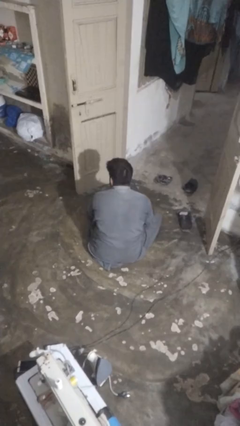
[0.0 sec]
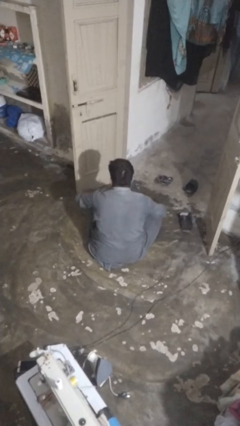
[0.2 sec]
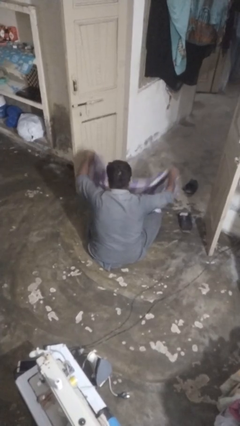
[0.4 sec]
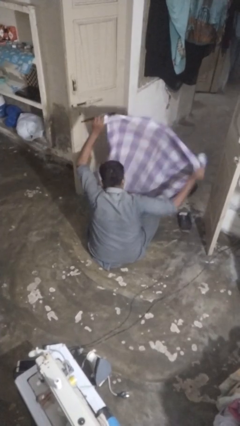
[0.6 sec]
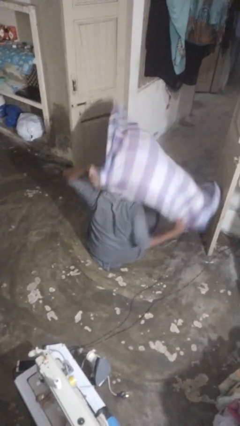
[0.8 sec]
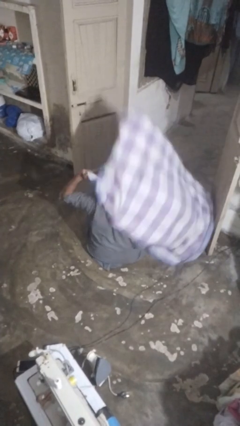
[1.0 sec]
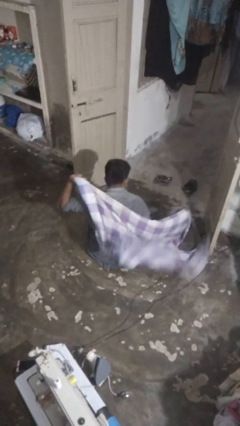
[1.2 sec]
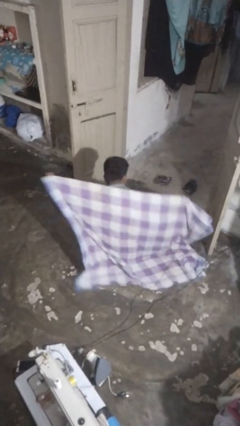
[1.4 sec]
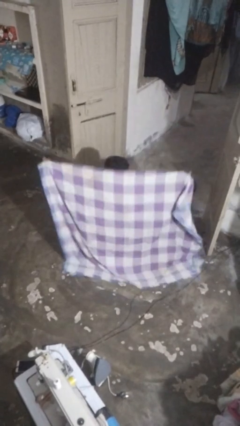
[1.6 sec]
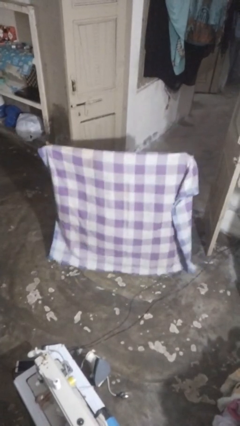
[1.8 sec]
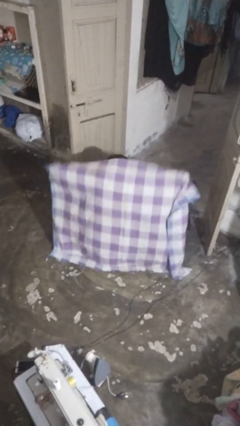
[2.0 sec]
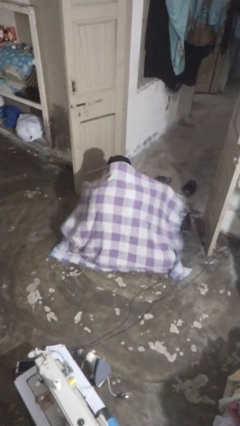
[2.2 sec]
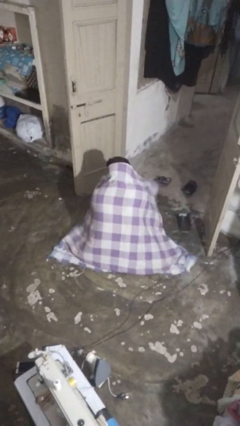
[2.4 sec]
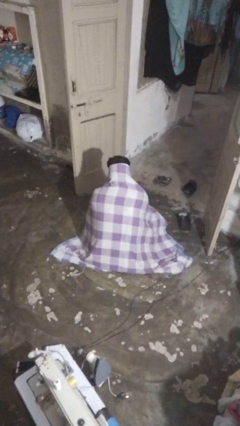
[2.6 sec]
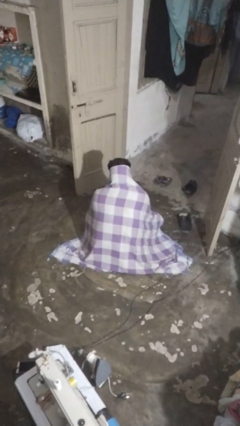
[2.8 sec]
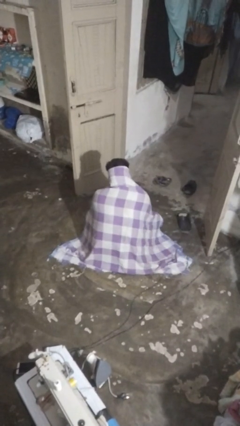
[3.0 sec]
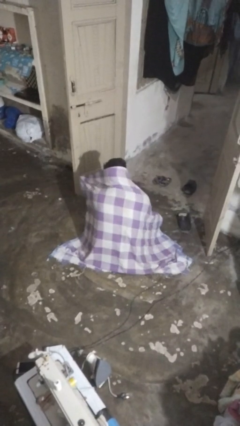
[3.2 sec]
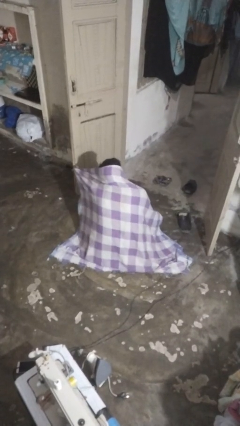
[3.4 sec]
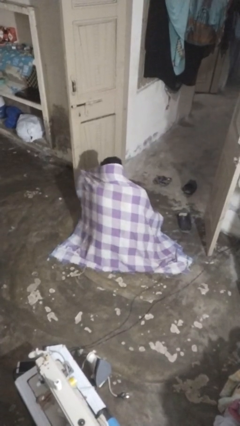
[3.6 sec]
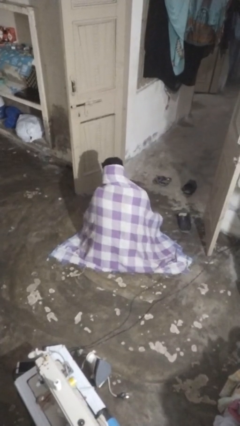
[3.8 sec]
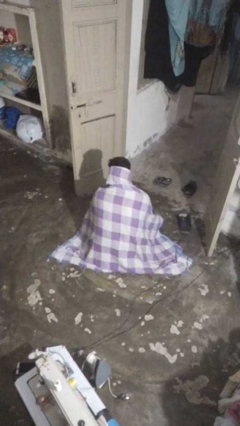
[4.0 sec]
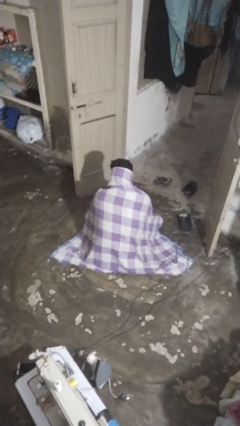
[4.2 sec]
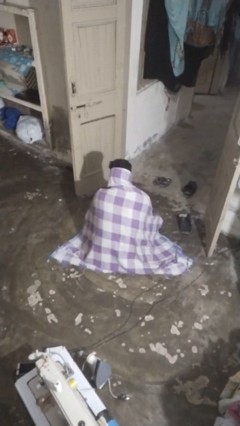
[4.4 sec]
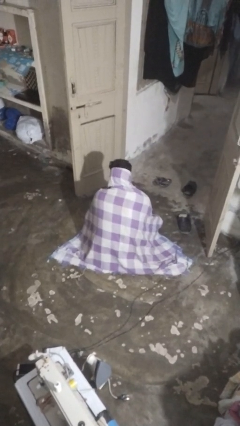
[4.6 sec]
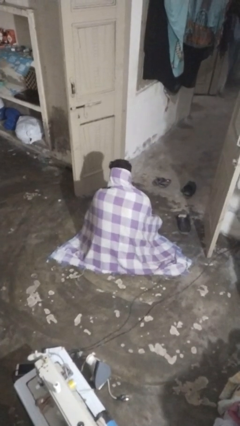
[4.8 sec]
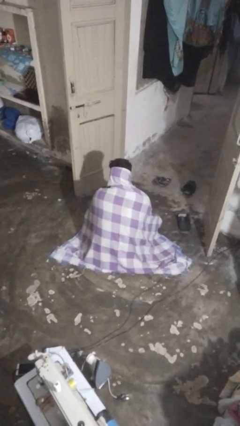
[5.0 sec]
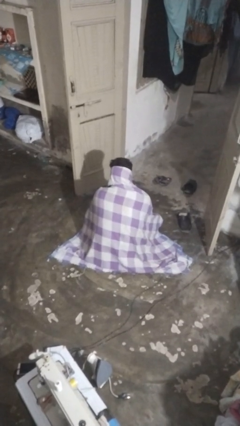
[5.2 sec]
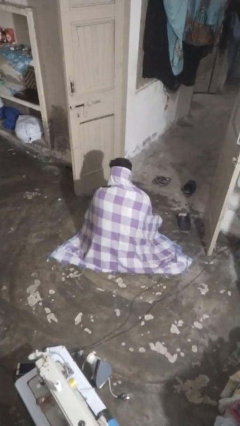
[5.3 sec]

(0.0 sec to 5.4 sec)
person covers with blanket

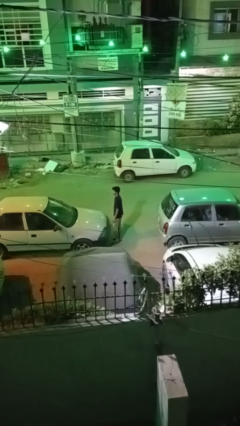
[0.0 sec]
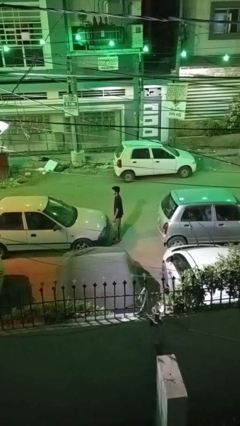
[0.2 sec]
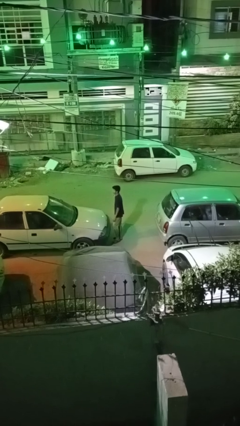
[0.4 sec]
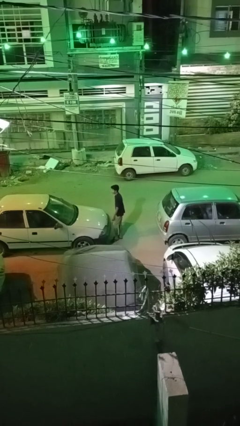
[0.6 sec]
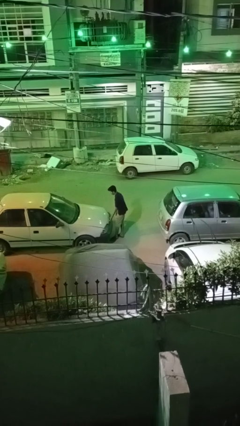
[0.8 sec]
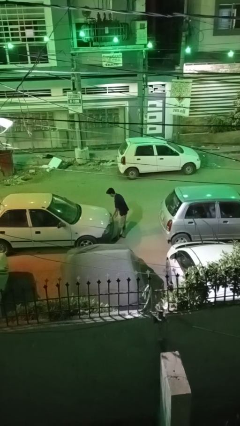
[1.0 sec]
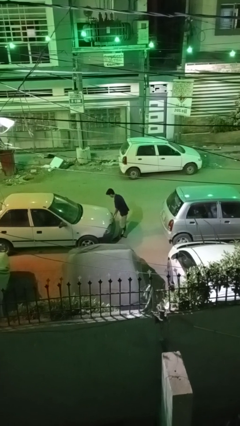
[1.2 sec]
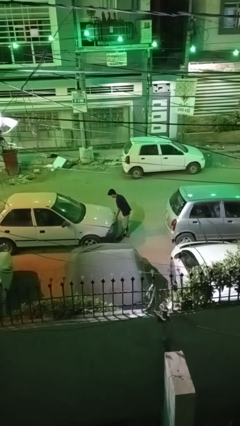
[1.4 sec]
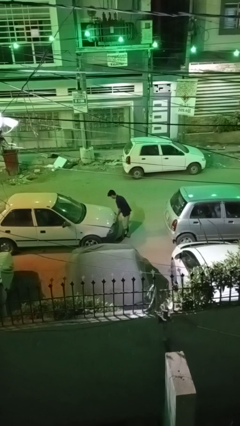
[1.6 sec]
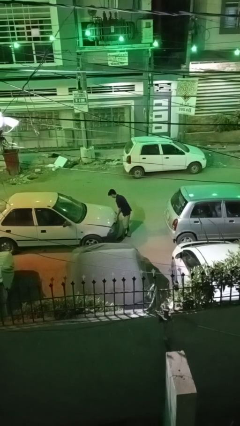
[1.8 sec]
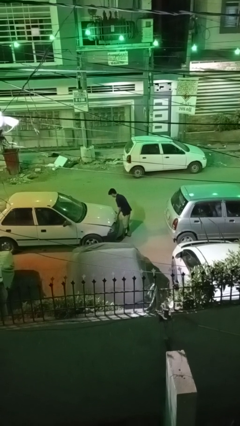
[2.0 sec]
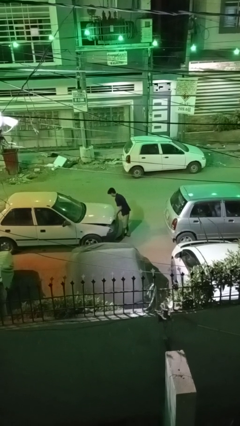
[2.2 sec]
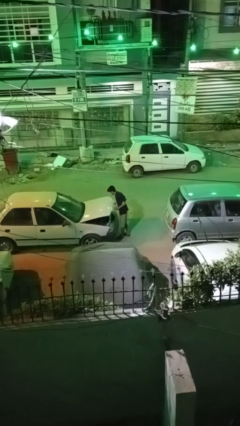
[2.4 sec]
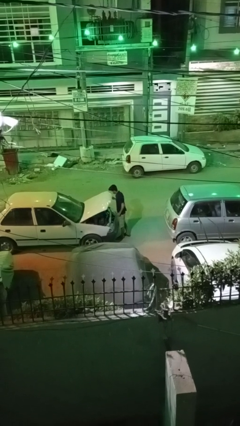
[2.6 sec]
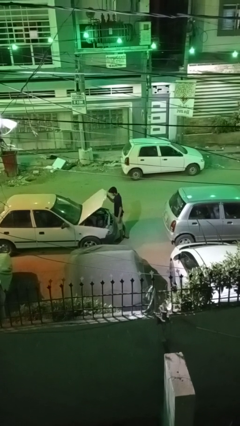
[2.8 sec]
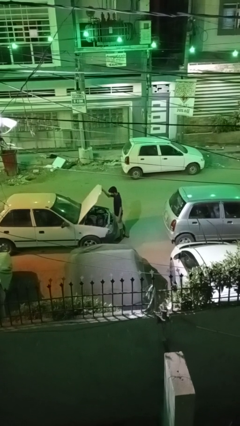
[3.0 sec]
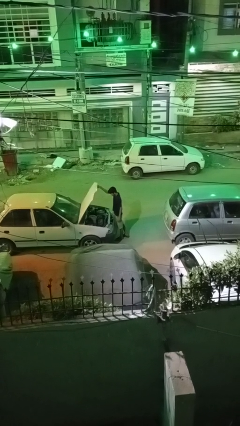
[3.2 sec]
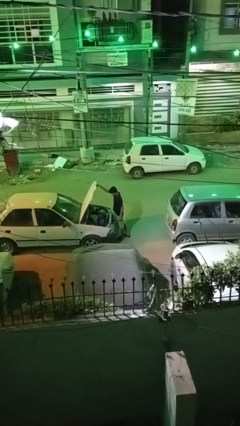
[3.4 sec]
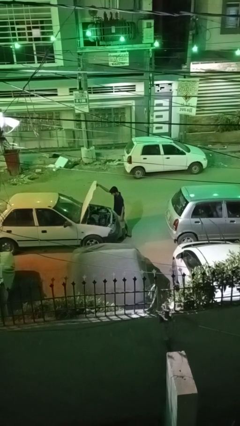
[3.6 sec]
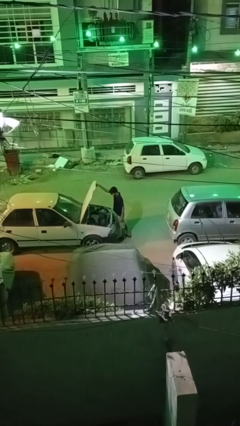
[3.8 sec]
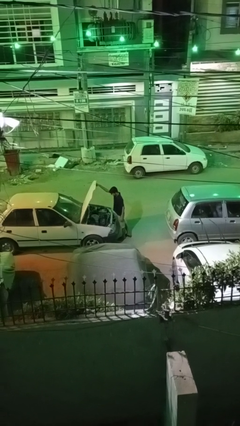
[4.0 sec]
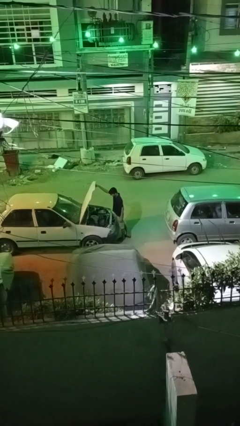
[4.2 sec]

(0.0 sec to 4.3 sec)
person opens car hood

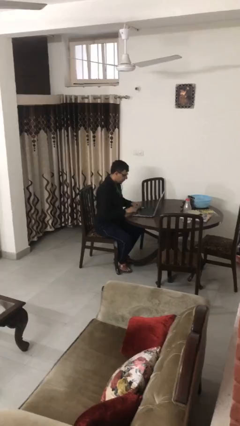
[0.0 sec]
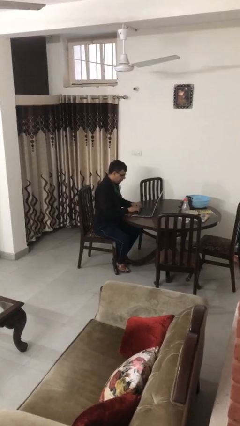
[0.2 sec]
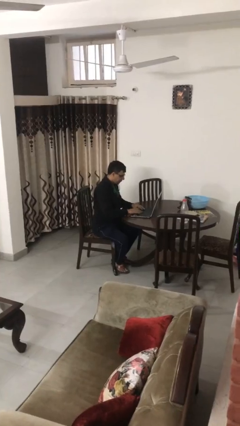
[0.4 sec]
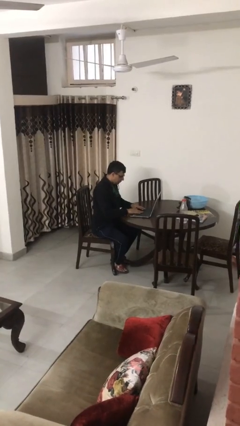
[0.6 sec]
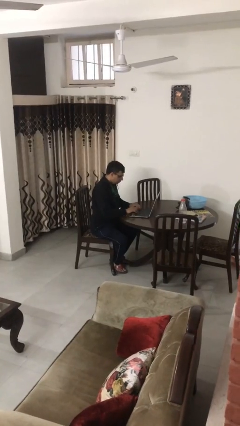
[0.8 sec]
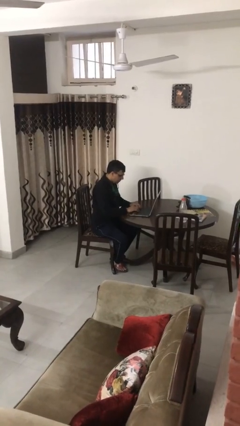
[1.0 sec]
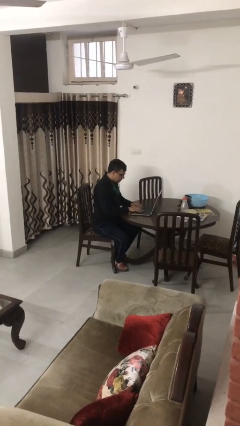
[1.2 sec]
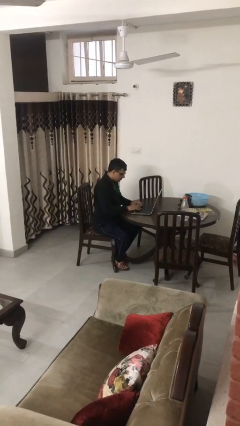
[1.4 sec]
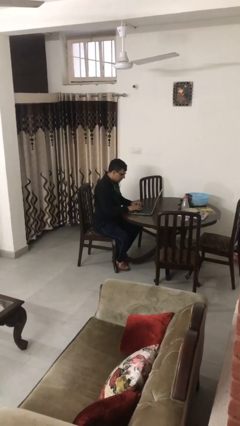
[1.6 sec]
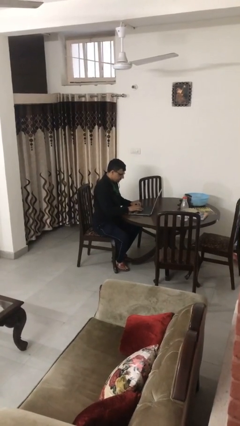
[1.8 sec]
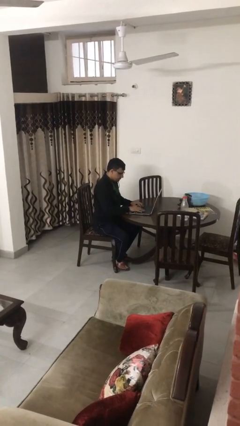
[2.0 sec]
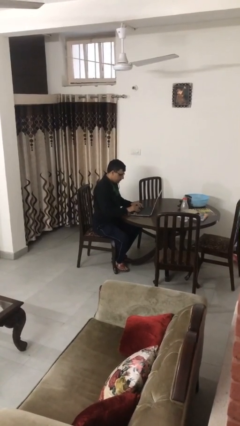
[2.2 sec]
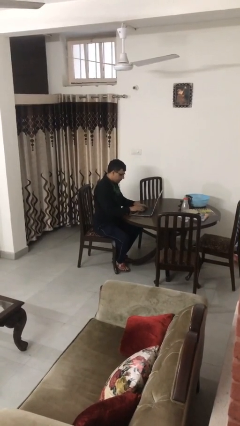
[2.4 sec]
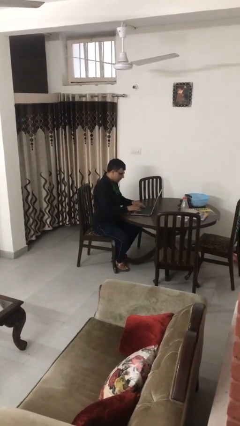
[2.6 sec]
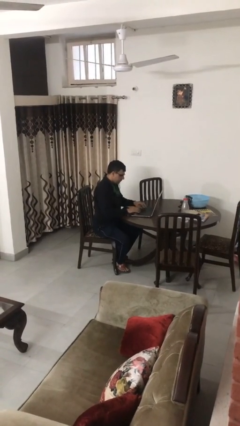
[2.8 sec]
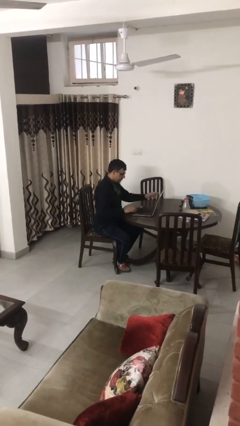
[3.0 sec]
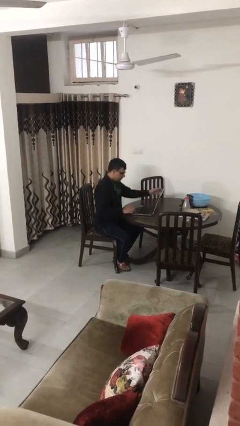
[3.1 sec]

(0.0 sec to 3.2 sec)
person interacts with laptop

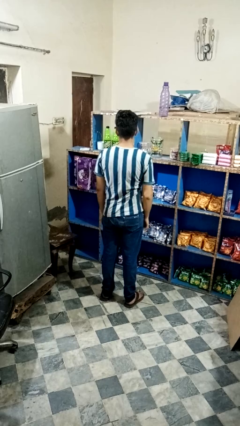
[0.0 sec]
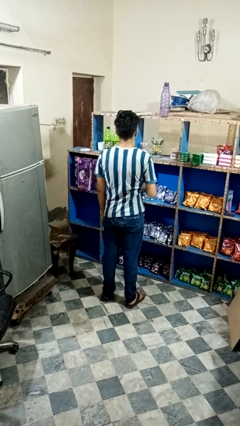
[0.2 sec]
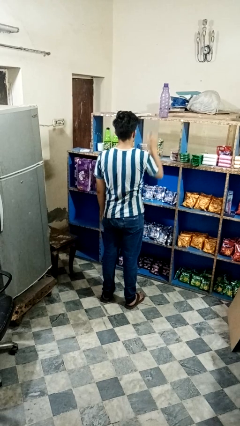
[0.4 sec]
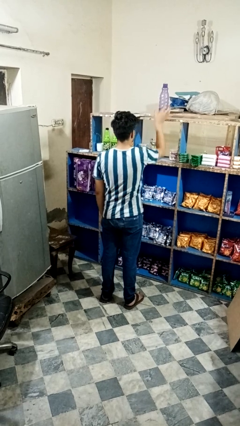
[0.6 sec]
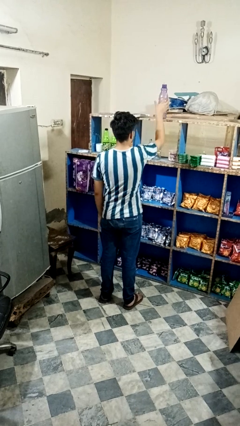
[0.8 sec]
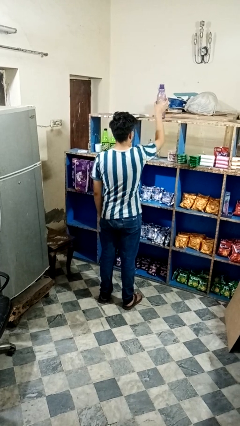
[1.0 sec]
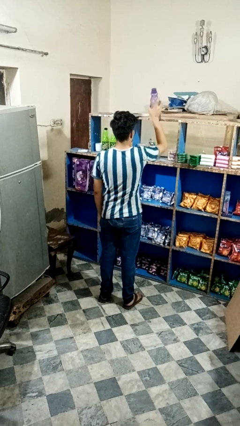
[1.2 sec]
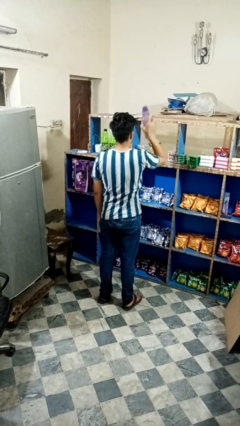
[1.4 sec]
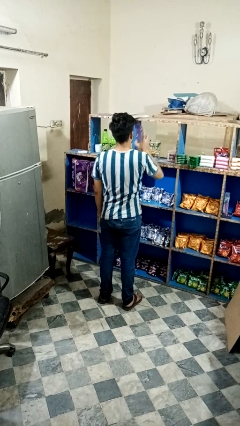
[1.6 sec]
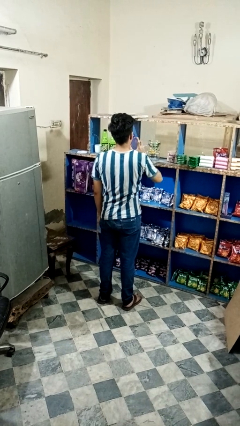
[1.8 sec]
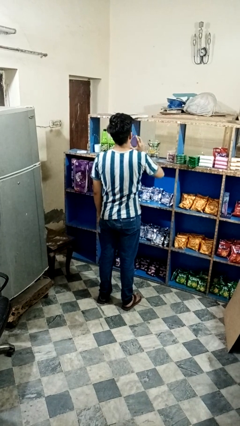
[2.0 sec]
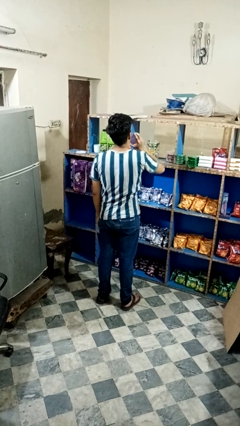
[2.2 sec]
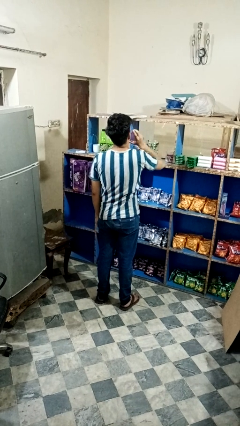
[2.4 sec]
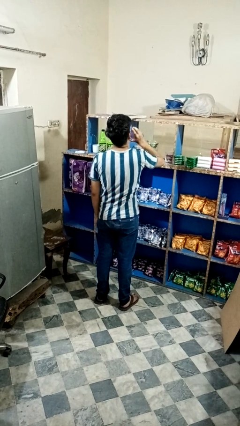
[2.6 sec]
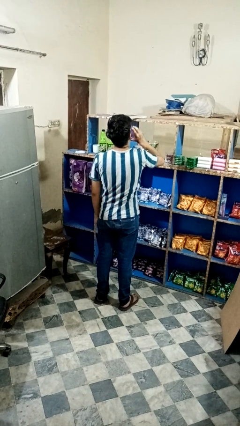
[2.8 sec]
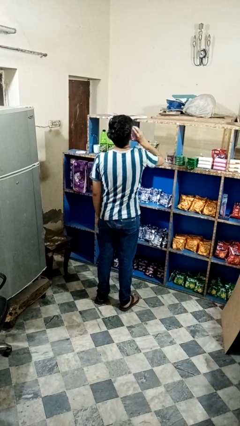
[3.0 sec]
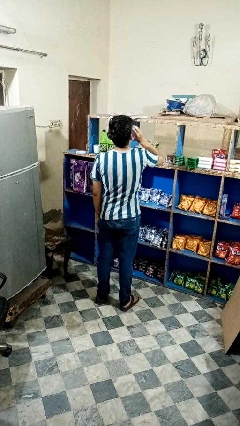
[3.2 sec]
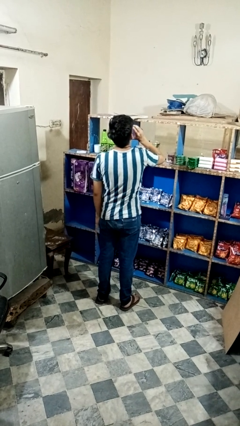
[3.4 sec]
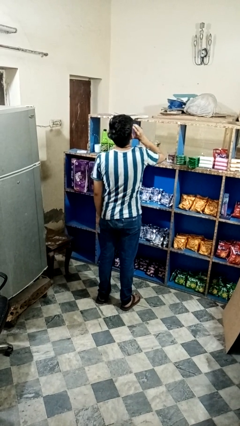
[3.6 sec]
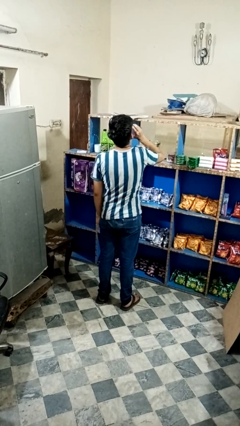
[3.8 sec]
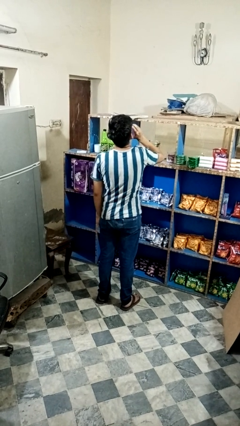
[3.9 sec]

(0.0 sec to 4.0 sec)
person drinks from bottle

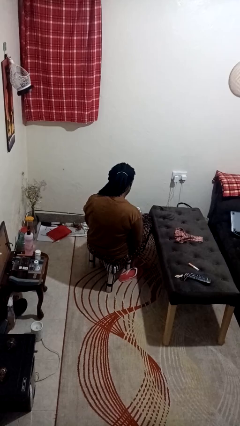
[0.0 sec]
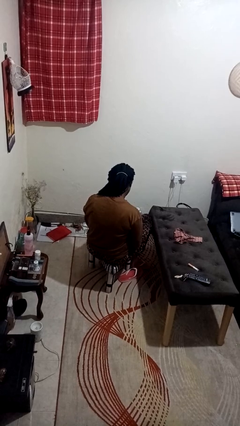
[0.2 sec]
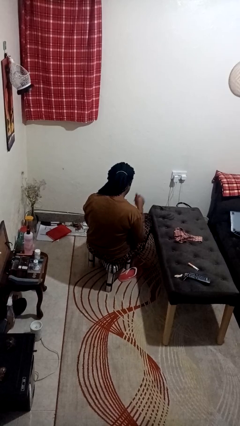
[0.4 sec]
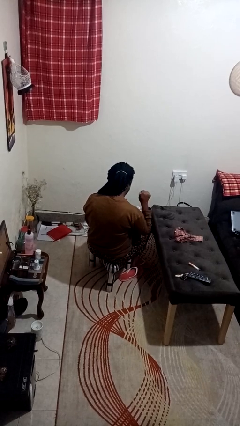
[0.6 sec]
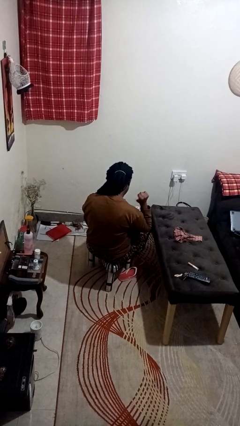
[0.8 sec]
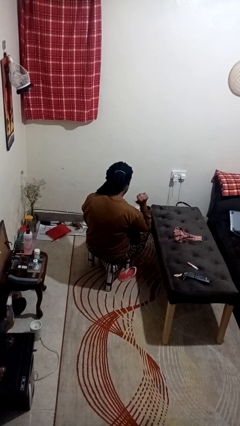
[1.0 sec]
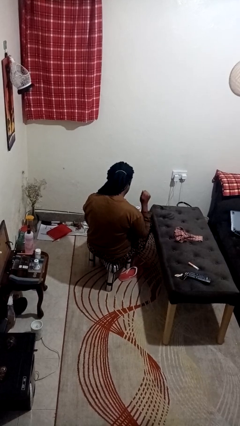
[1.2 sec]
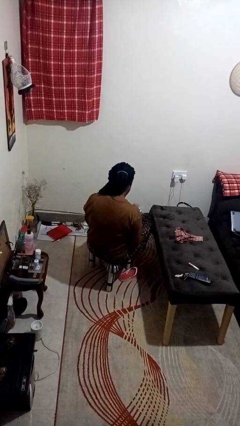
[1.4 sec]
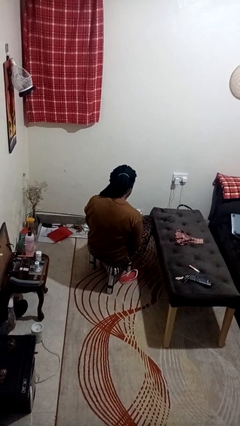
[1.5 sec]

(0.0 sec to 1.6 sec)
person gestures behind me
